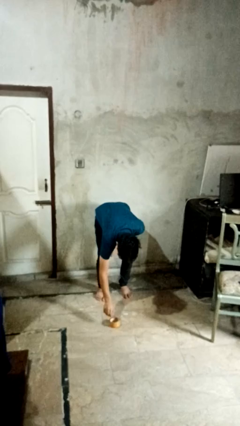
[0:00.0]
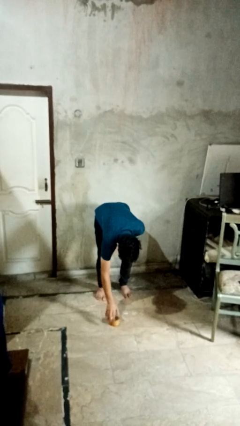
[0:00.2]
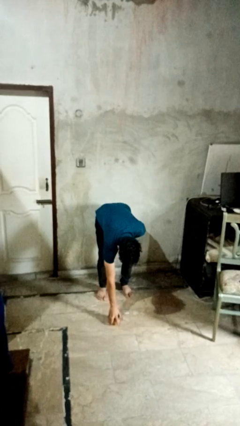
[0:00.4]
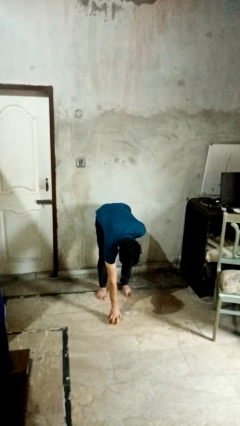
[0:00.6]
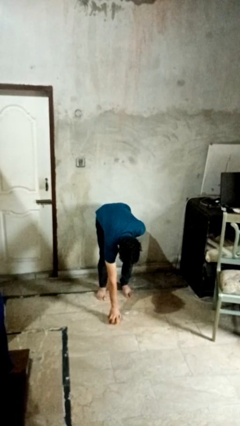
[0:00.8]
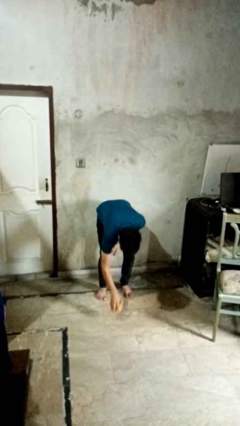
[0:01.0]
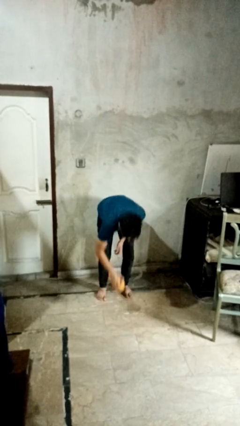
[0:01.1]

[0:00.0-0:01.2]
person picks up object from floor

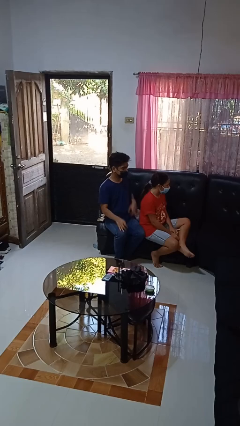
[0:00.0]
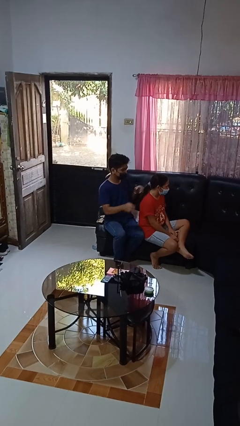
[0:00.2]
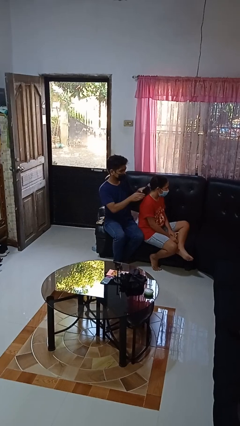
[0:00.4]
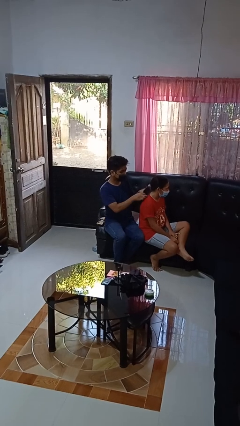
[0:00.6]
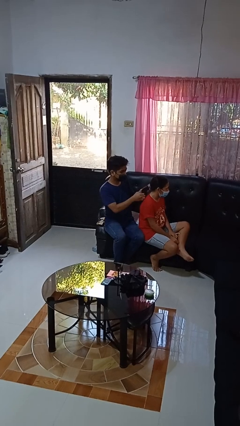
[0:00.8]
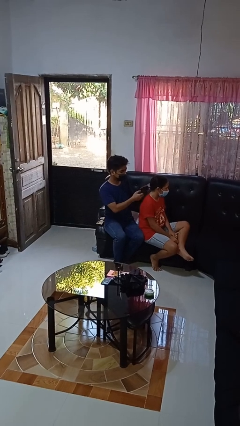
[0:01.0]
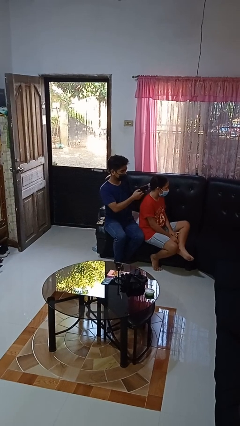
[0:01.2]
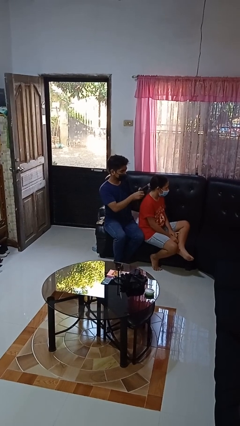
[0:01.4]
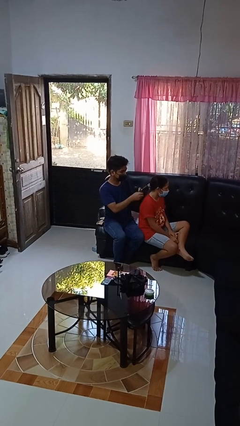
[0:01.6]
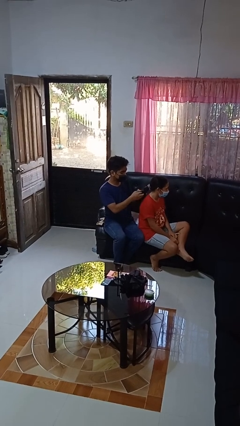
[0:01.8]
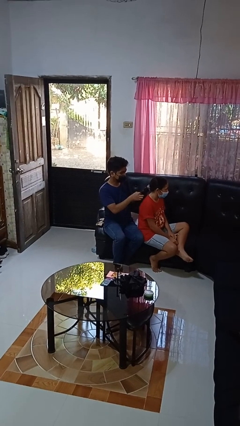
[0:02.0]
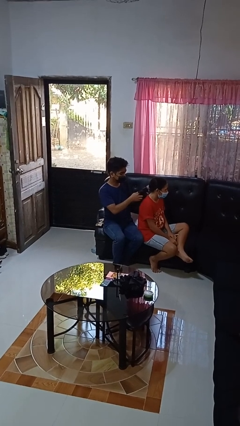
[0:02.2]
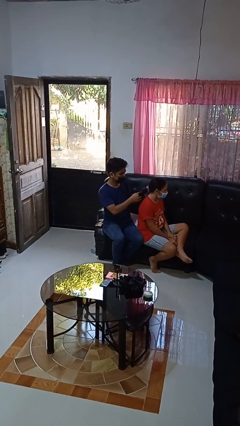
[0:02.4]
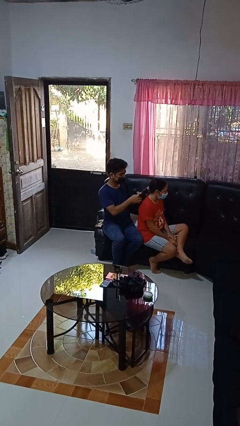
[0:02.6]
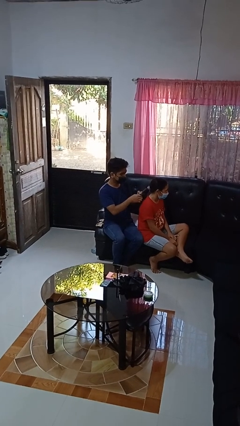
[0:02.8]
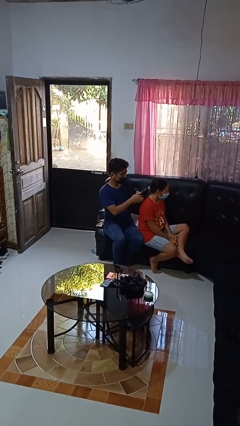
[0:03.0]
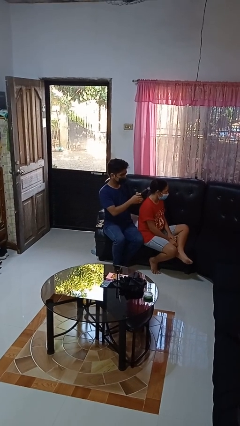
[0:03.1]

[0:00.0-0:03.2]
person braids hair of person

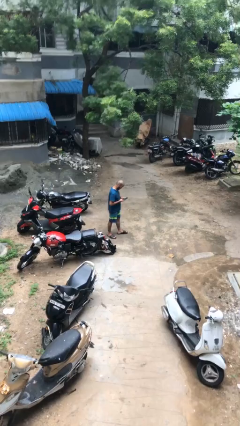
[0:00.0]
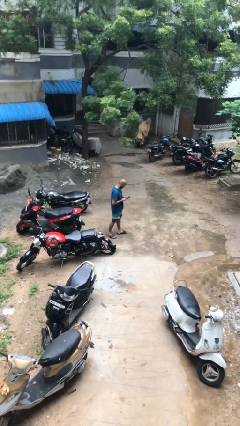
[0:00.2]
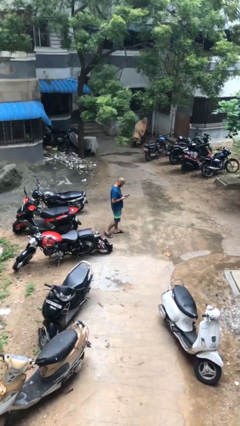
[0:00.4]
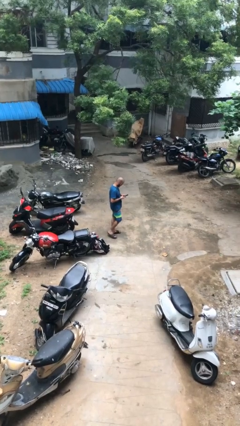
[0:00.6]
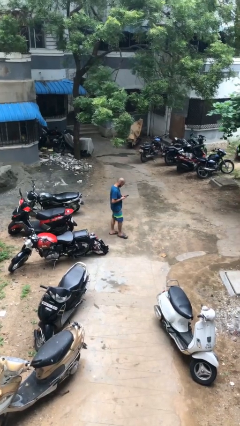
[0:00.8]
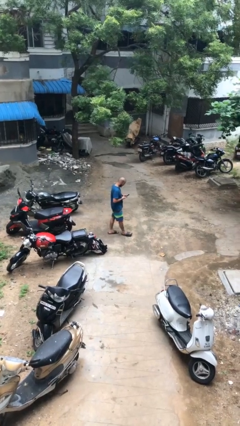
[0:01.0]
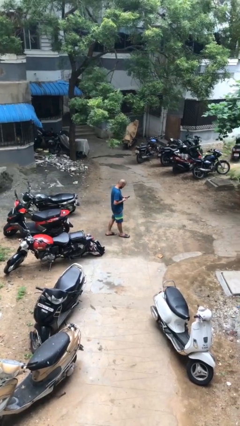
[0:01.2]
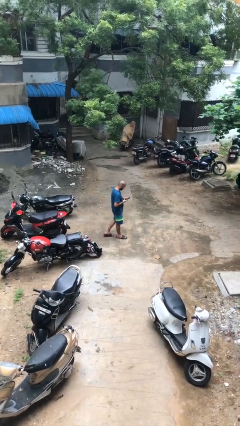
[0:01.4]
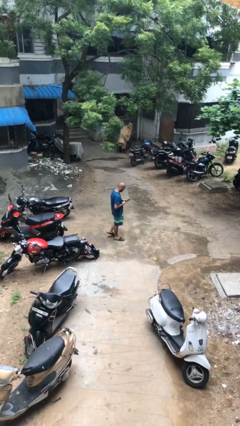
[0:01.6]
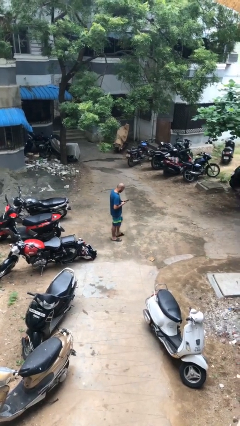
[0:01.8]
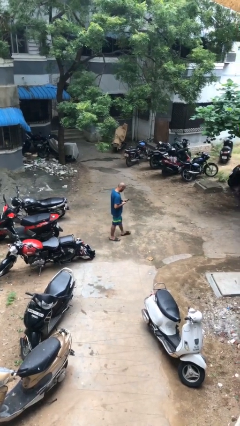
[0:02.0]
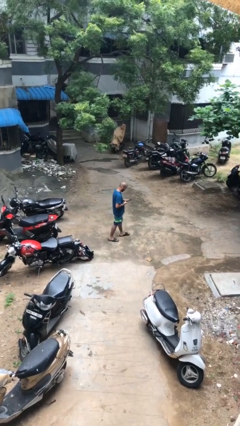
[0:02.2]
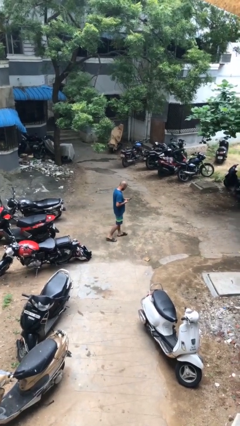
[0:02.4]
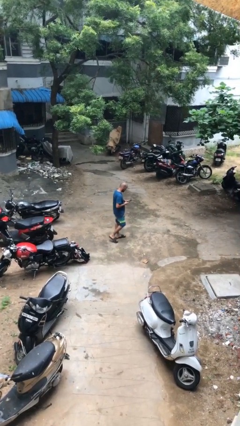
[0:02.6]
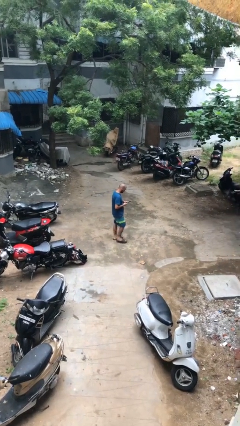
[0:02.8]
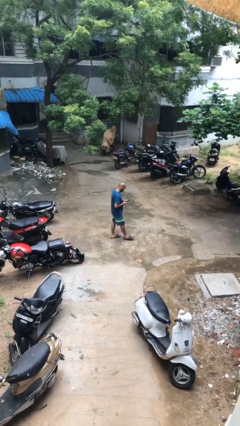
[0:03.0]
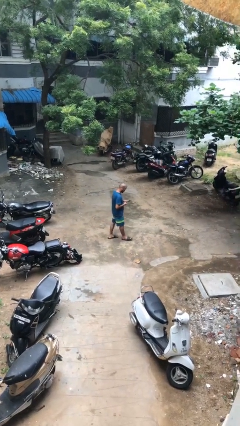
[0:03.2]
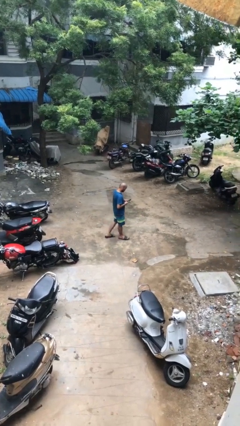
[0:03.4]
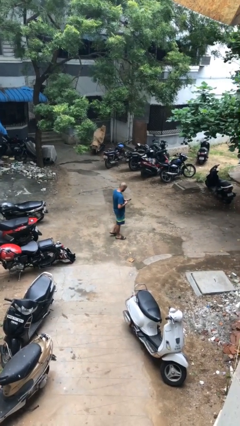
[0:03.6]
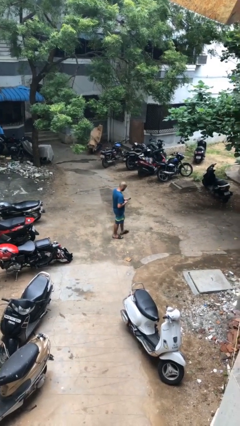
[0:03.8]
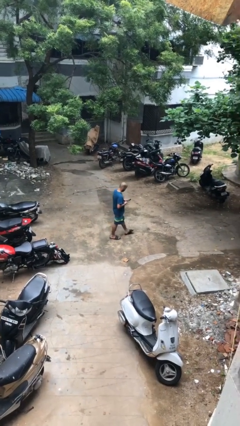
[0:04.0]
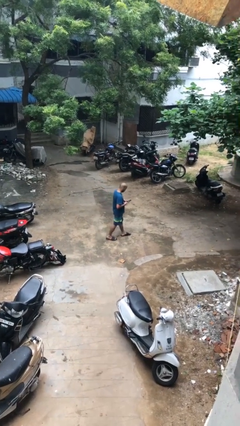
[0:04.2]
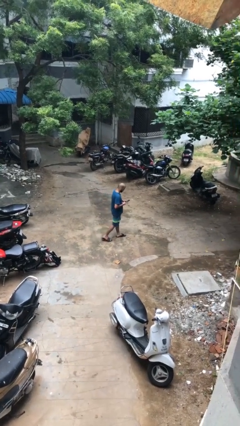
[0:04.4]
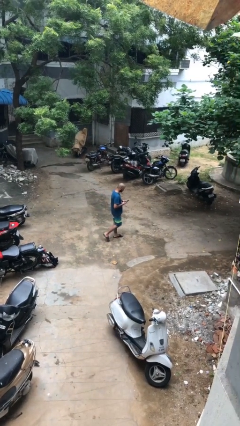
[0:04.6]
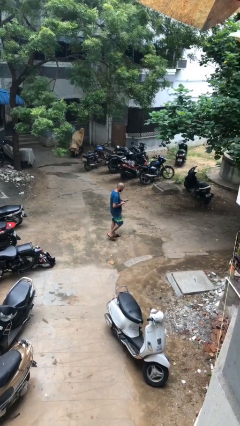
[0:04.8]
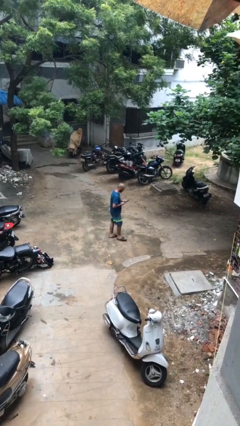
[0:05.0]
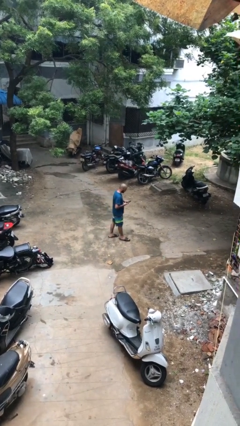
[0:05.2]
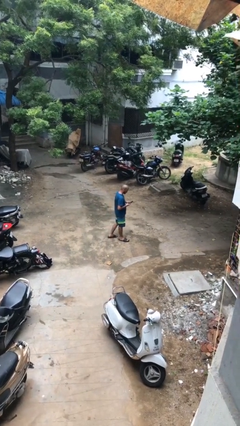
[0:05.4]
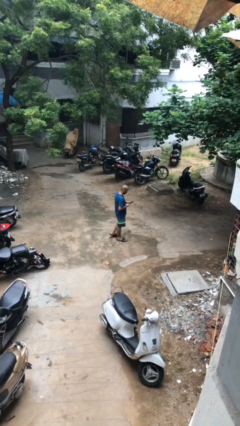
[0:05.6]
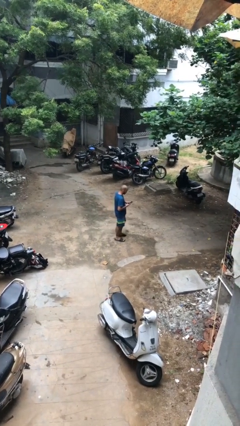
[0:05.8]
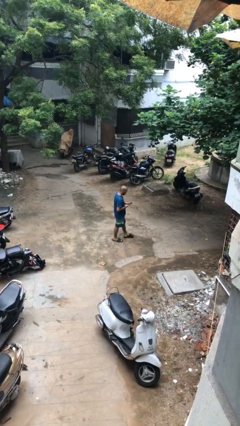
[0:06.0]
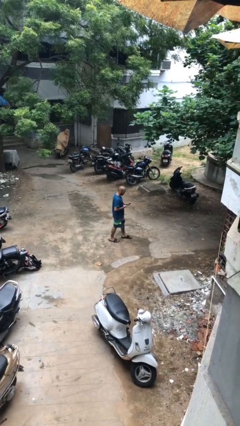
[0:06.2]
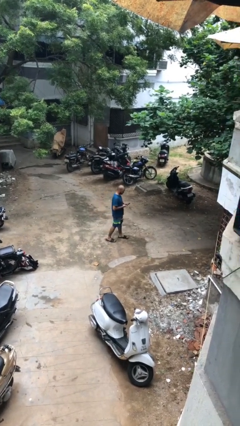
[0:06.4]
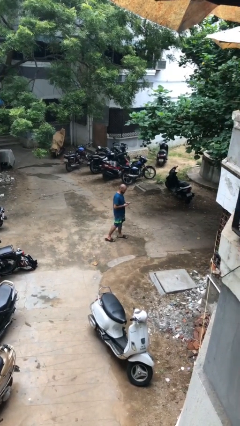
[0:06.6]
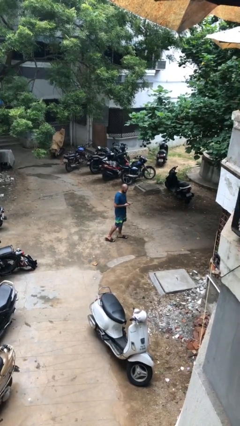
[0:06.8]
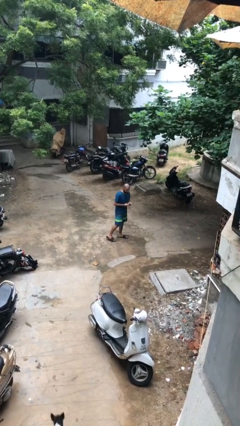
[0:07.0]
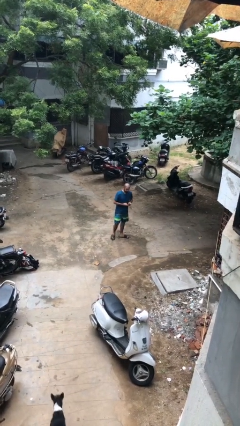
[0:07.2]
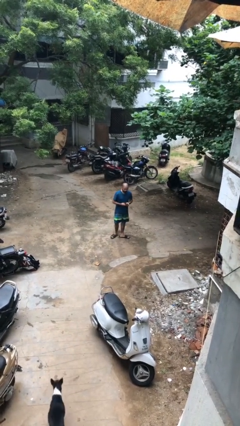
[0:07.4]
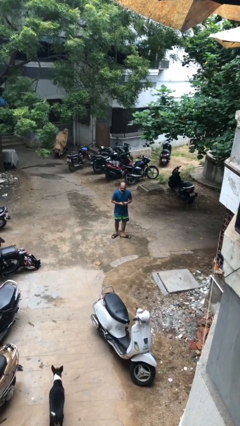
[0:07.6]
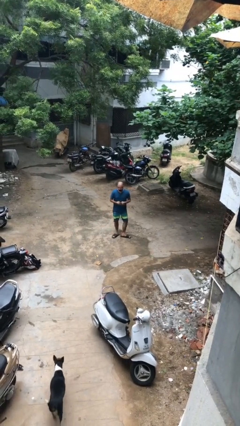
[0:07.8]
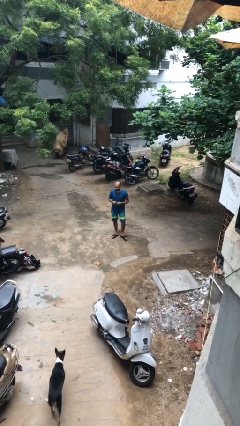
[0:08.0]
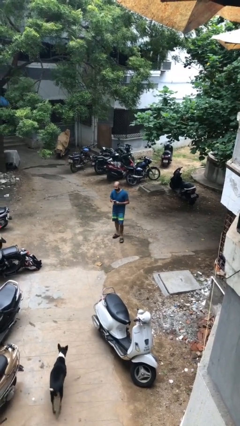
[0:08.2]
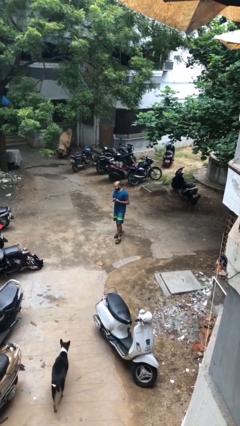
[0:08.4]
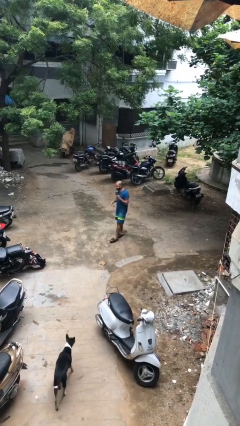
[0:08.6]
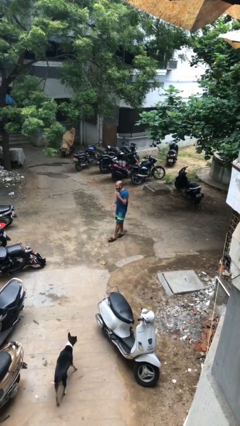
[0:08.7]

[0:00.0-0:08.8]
person texts on phone

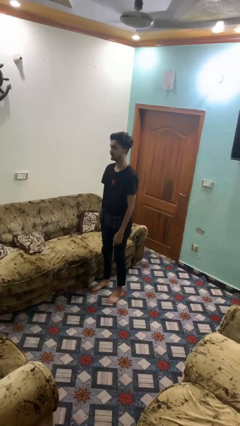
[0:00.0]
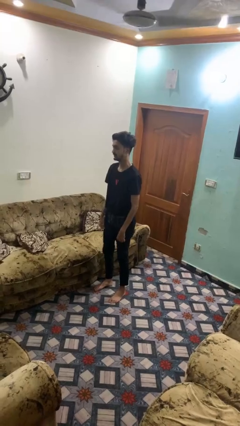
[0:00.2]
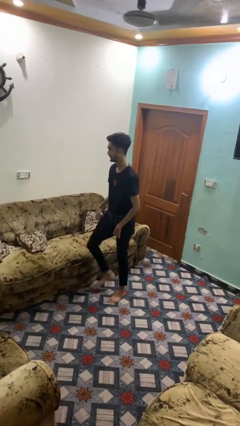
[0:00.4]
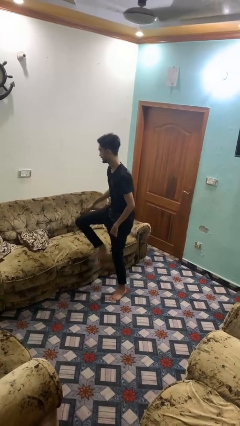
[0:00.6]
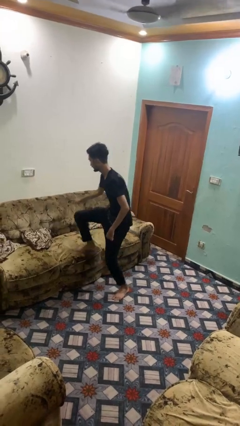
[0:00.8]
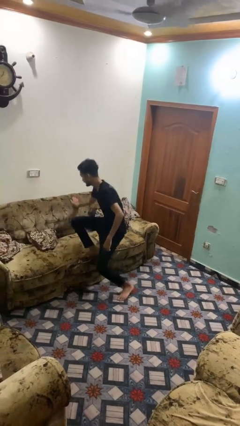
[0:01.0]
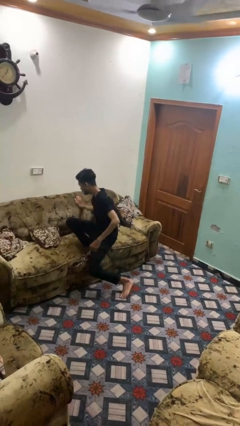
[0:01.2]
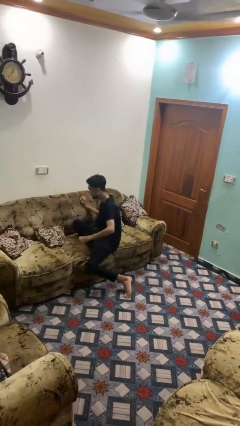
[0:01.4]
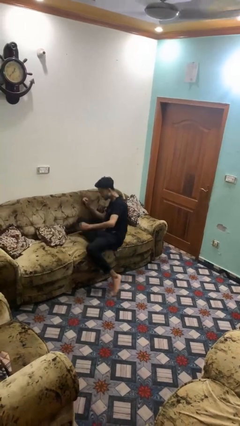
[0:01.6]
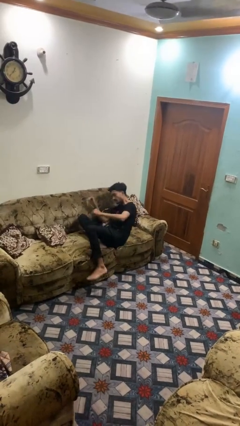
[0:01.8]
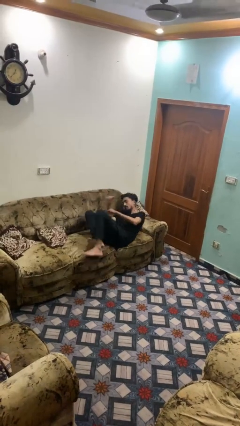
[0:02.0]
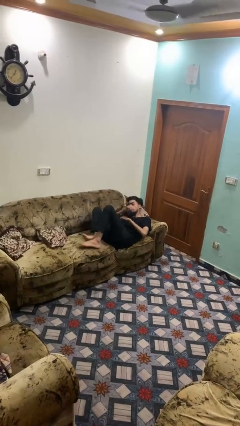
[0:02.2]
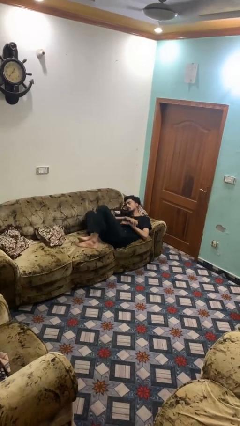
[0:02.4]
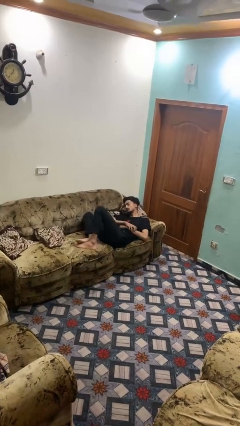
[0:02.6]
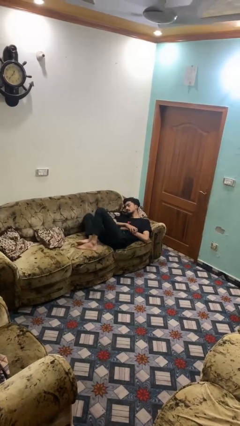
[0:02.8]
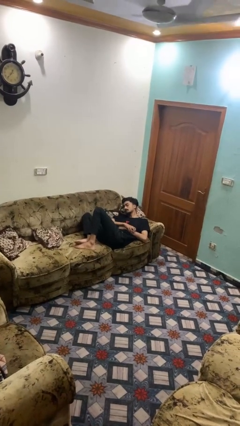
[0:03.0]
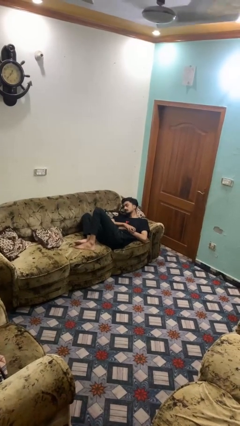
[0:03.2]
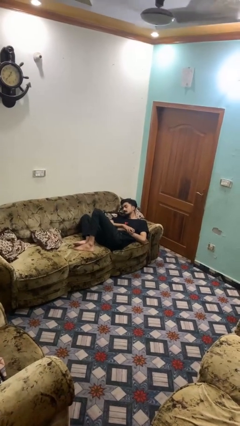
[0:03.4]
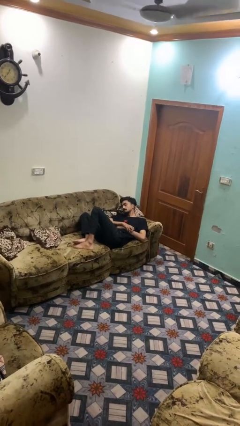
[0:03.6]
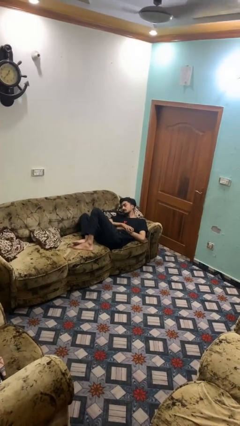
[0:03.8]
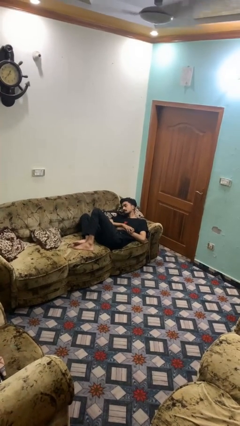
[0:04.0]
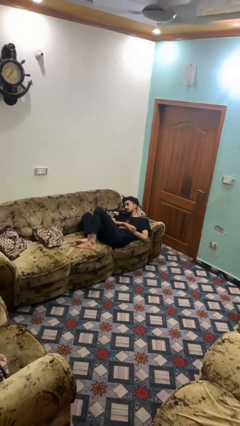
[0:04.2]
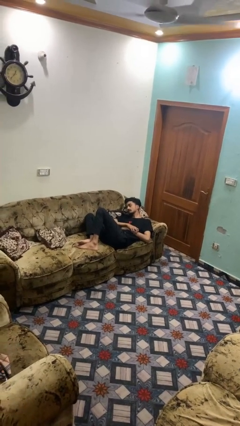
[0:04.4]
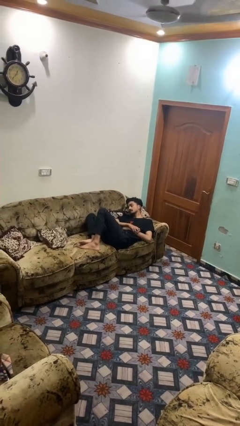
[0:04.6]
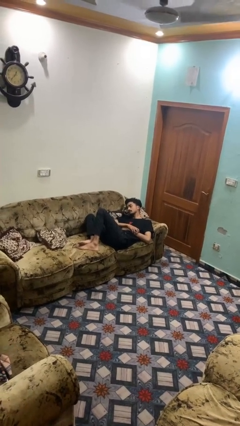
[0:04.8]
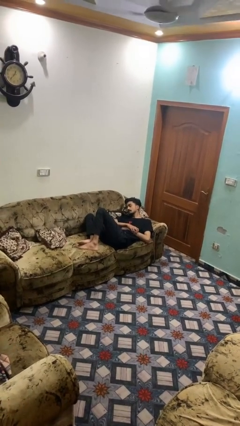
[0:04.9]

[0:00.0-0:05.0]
person lies down on couch
